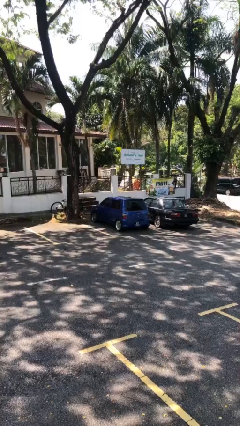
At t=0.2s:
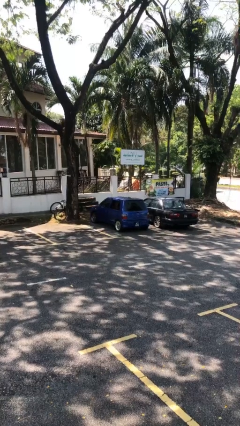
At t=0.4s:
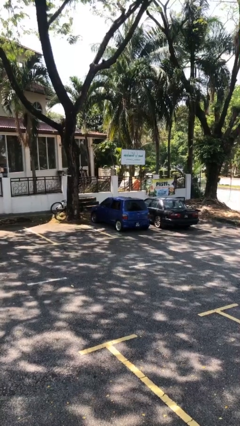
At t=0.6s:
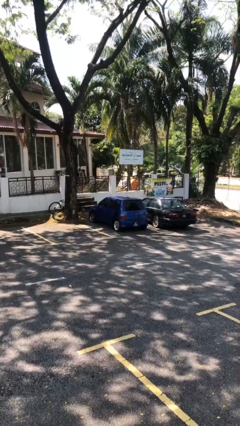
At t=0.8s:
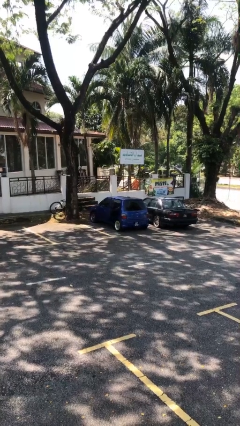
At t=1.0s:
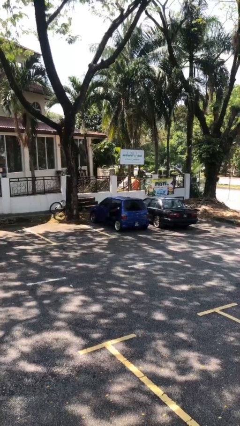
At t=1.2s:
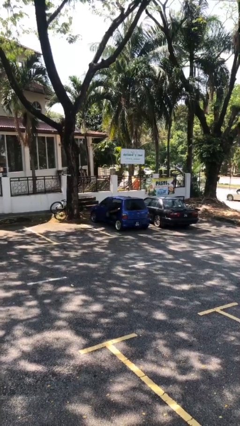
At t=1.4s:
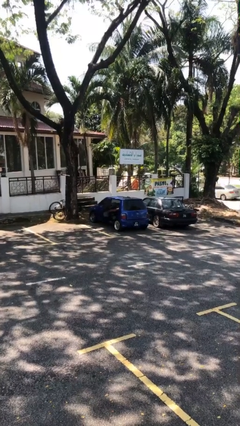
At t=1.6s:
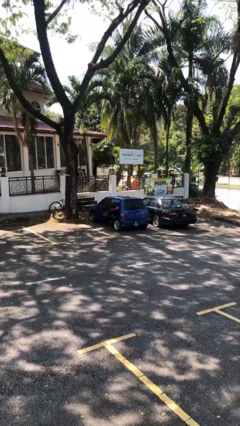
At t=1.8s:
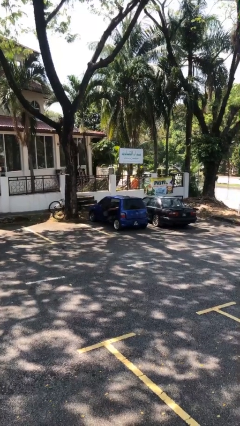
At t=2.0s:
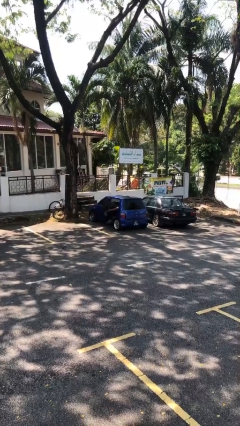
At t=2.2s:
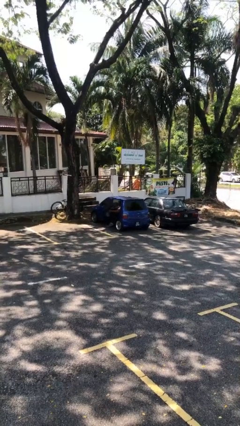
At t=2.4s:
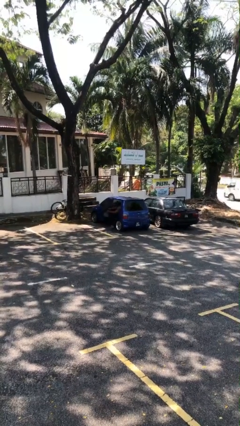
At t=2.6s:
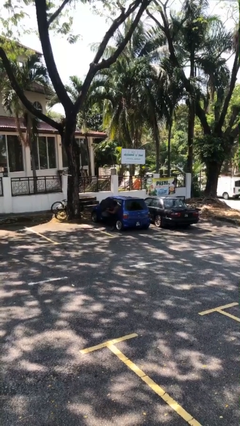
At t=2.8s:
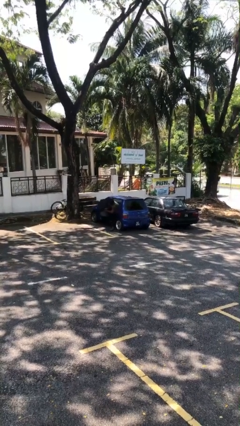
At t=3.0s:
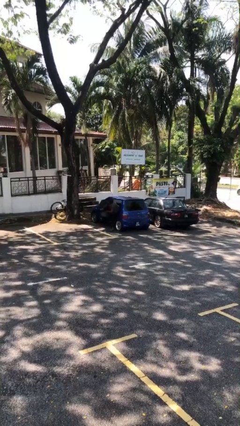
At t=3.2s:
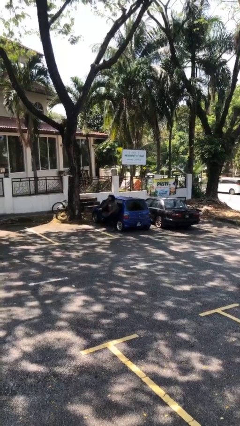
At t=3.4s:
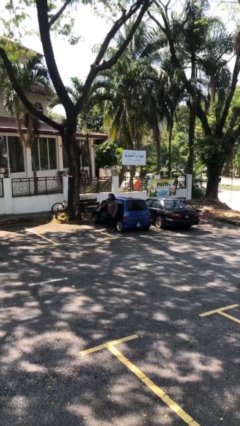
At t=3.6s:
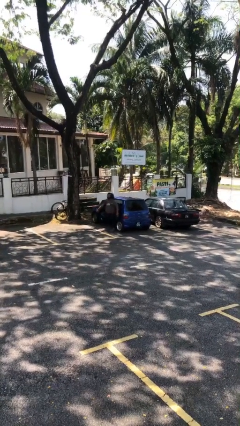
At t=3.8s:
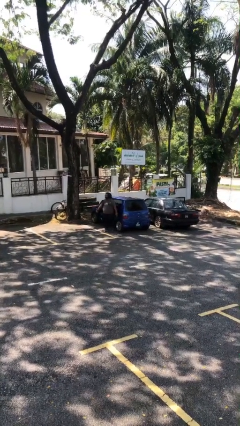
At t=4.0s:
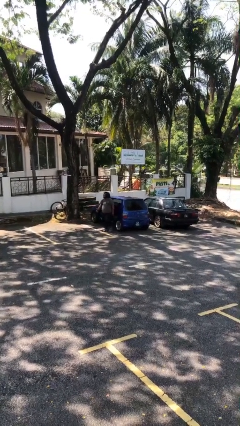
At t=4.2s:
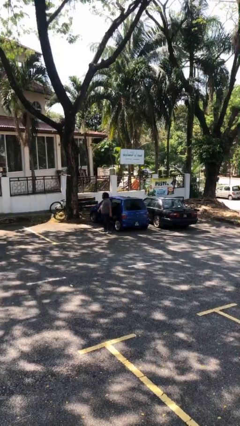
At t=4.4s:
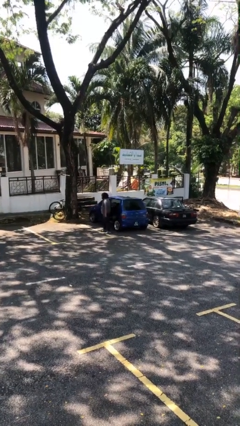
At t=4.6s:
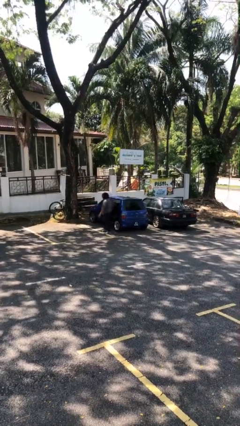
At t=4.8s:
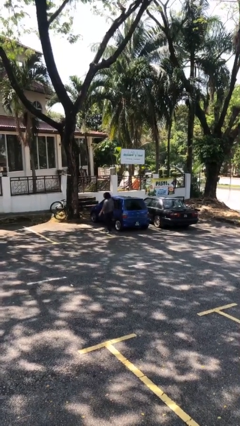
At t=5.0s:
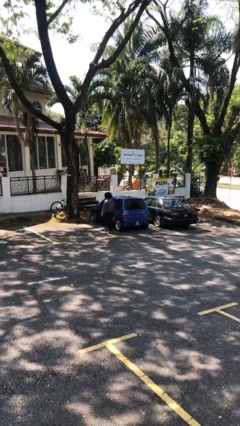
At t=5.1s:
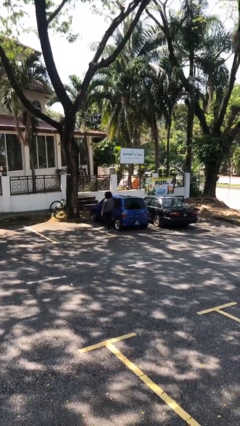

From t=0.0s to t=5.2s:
car drops off person

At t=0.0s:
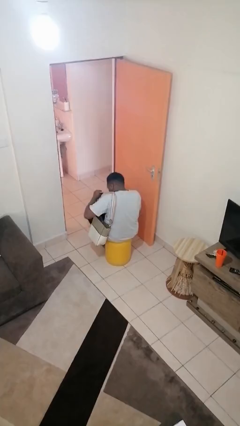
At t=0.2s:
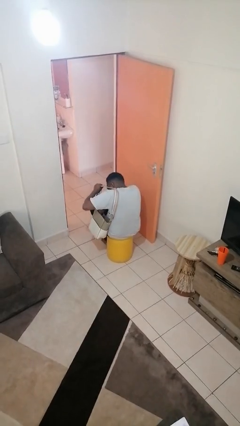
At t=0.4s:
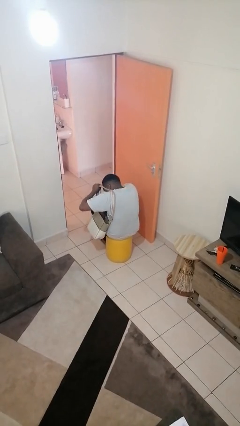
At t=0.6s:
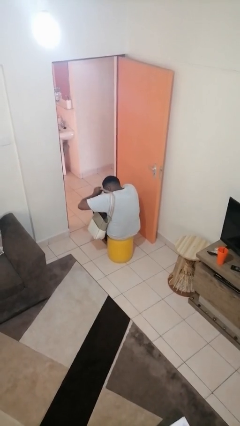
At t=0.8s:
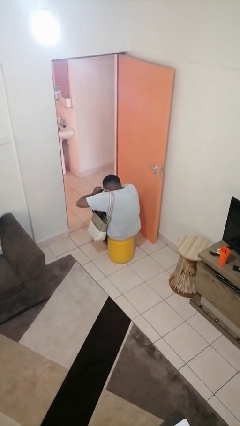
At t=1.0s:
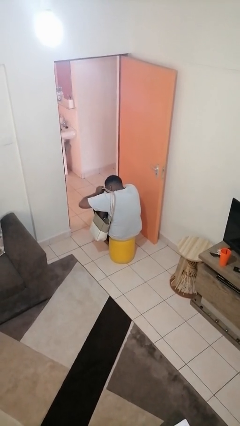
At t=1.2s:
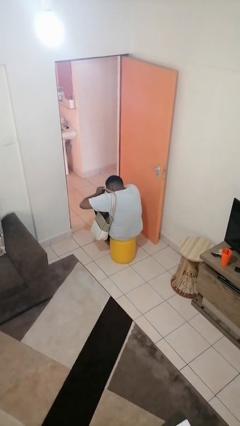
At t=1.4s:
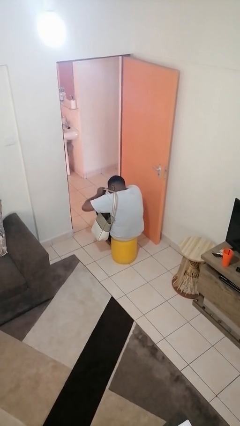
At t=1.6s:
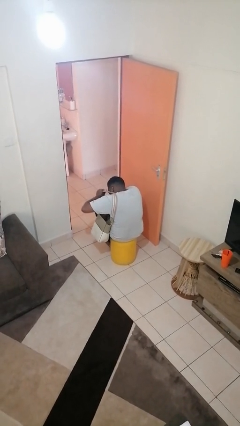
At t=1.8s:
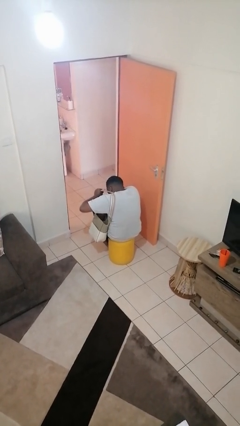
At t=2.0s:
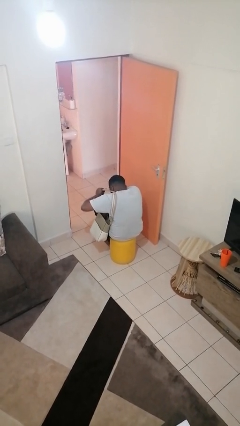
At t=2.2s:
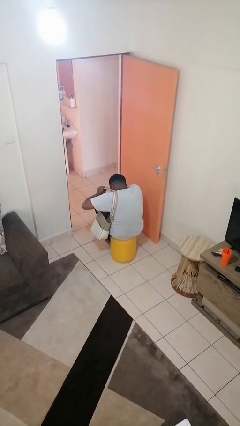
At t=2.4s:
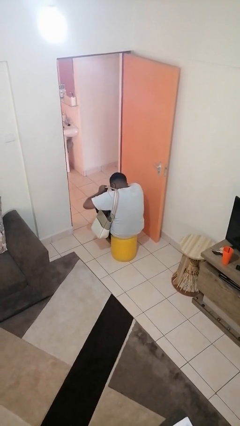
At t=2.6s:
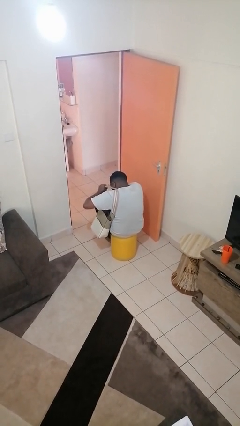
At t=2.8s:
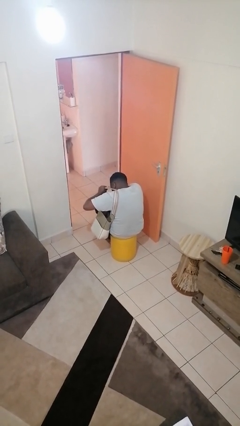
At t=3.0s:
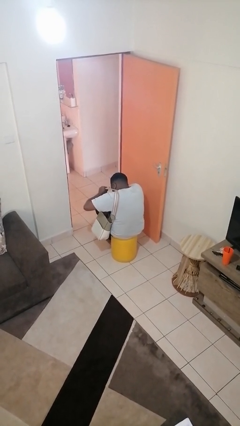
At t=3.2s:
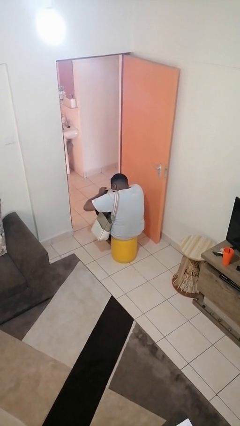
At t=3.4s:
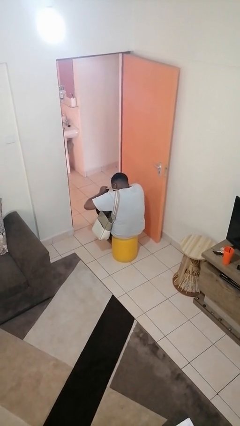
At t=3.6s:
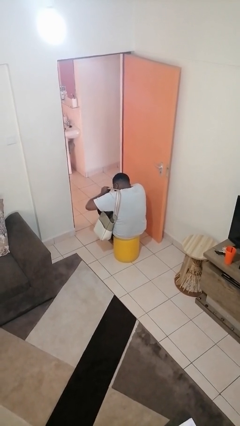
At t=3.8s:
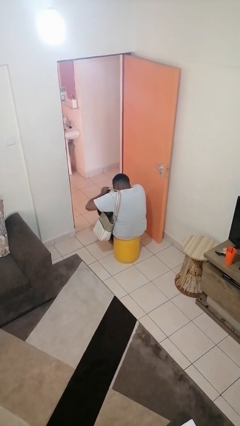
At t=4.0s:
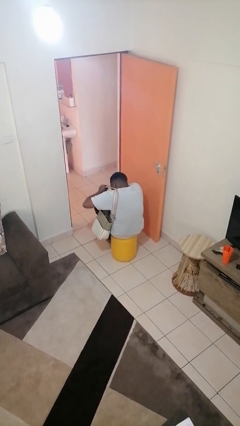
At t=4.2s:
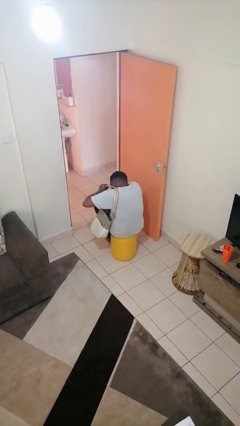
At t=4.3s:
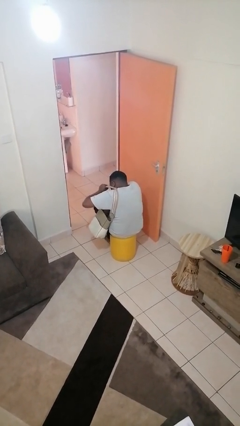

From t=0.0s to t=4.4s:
person searches in purse

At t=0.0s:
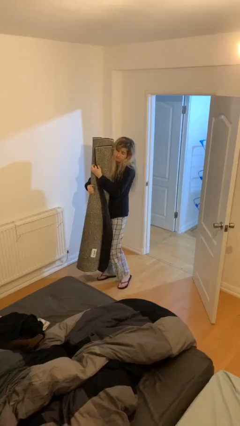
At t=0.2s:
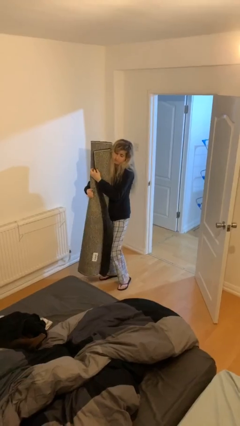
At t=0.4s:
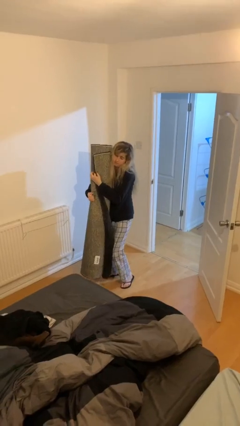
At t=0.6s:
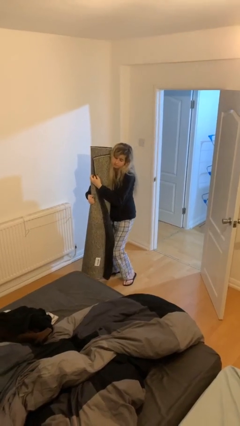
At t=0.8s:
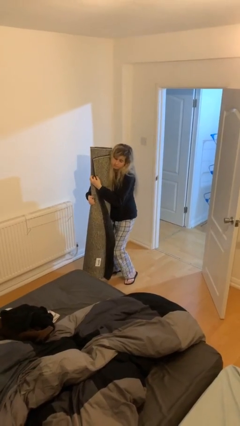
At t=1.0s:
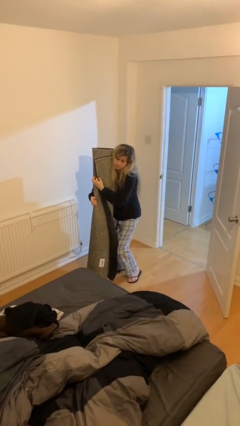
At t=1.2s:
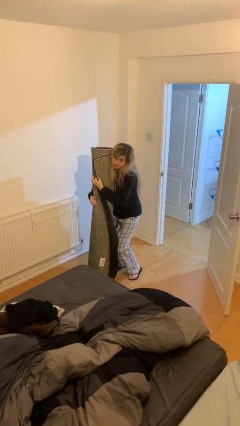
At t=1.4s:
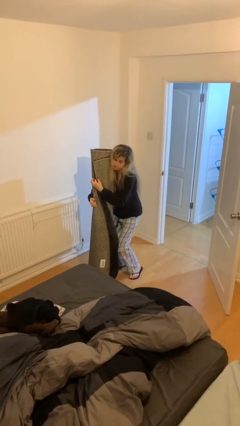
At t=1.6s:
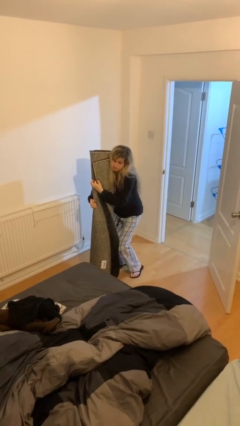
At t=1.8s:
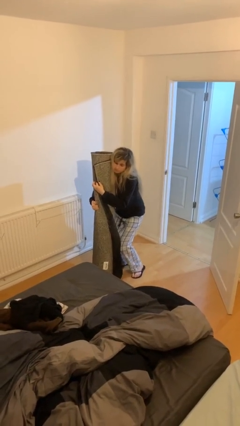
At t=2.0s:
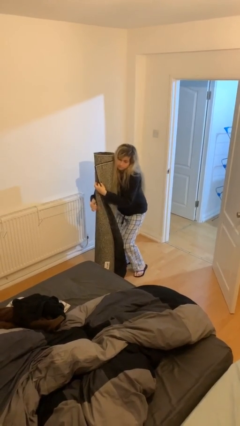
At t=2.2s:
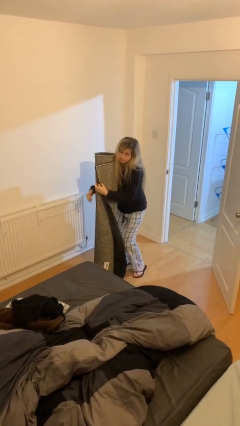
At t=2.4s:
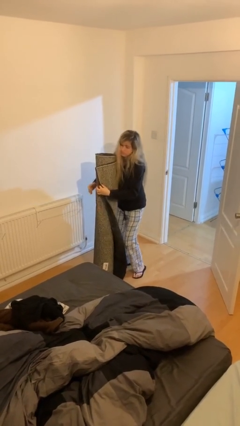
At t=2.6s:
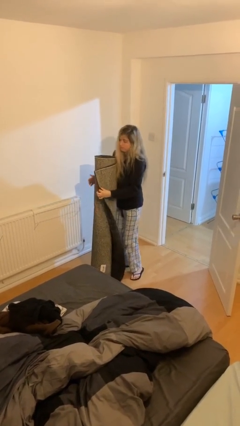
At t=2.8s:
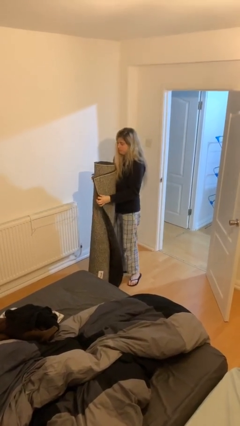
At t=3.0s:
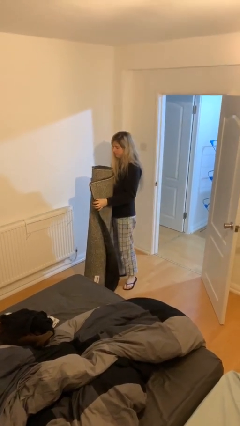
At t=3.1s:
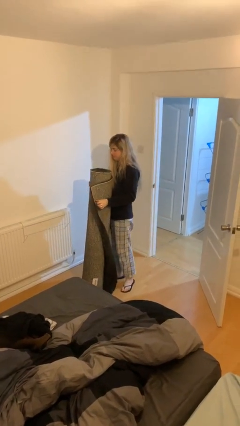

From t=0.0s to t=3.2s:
person puts down object on floor

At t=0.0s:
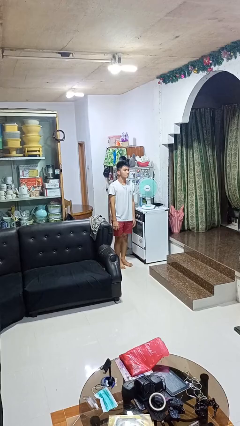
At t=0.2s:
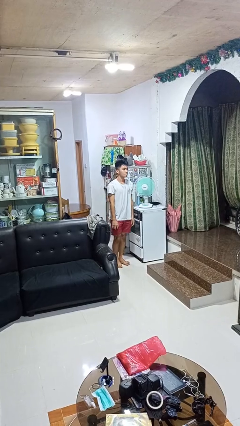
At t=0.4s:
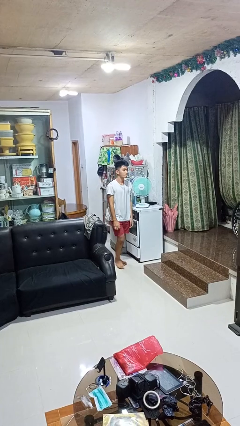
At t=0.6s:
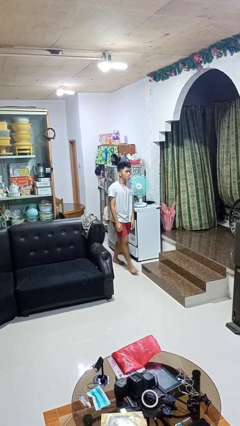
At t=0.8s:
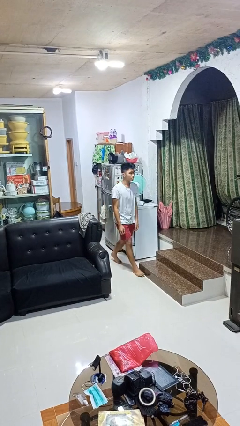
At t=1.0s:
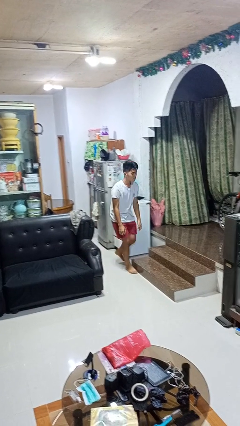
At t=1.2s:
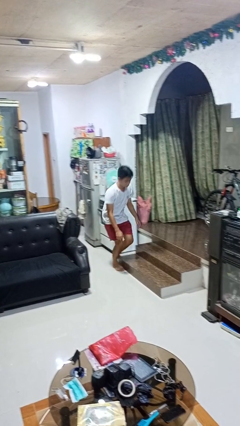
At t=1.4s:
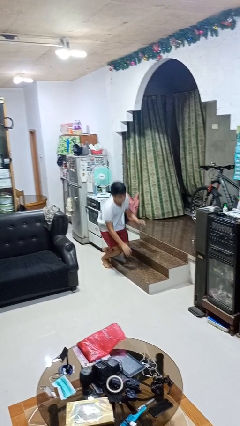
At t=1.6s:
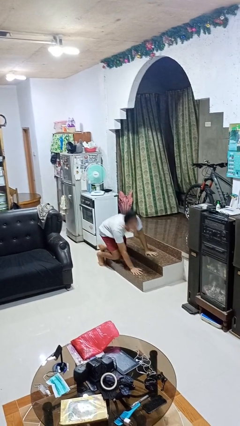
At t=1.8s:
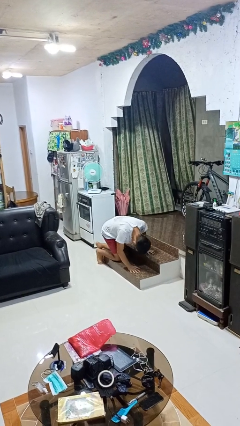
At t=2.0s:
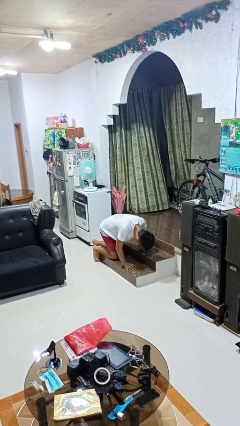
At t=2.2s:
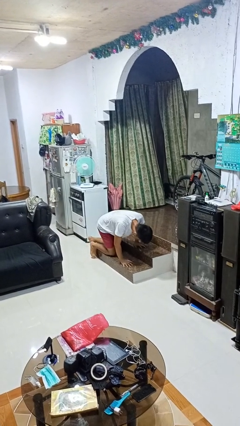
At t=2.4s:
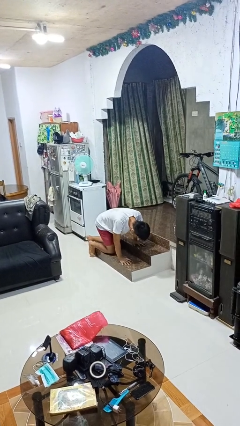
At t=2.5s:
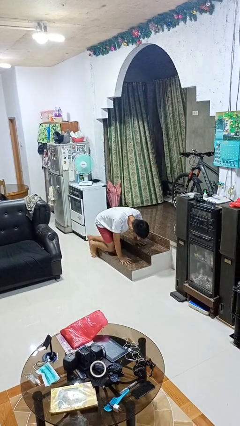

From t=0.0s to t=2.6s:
person trips on object on floor

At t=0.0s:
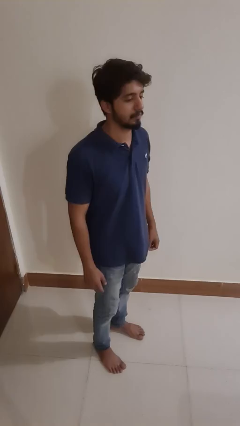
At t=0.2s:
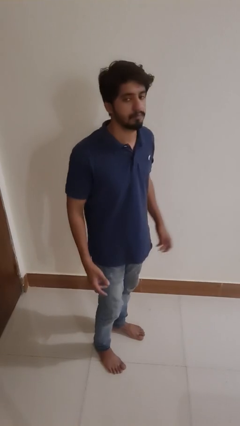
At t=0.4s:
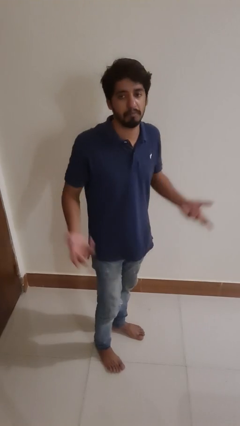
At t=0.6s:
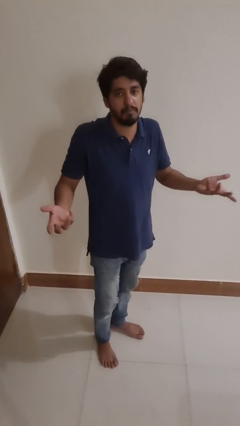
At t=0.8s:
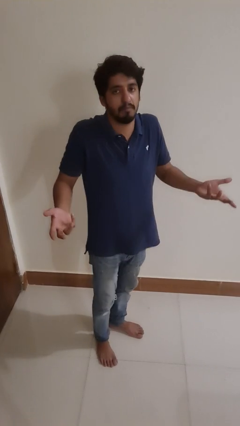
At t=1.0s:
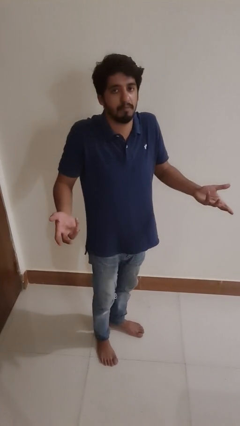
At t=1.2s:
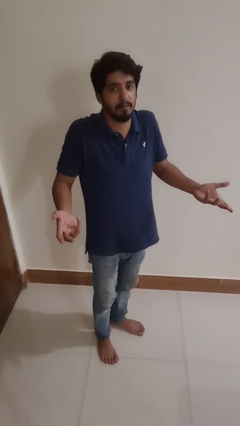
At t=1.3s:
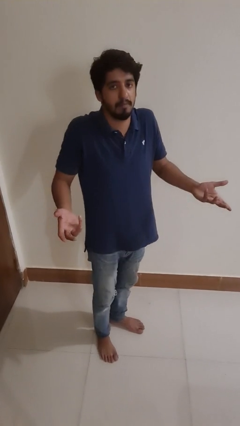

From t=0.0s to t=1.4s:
person shrugs

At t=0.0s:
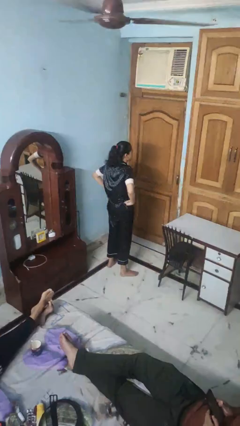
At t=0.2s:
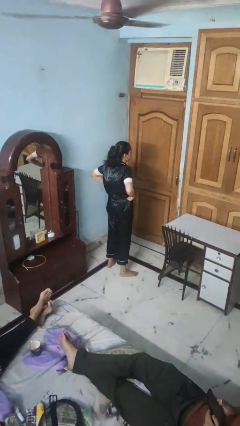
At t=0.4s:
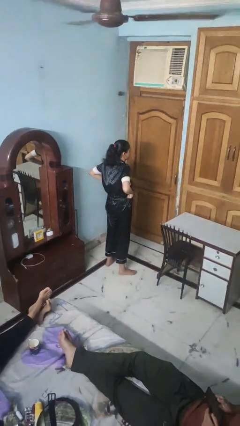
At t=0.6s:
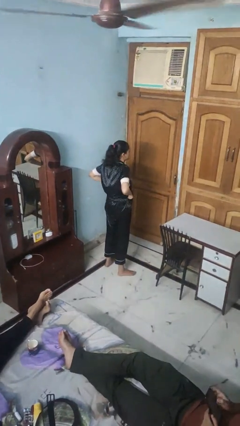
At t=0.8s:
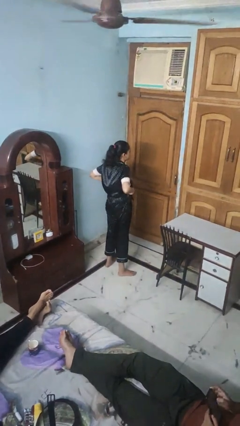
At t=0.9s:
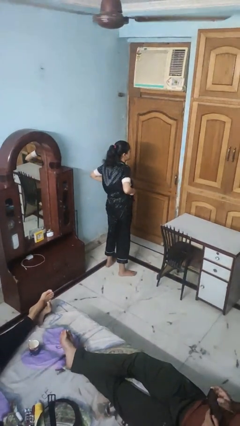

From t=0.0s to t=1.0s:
person hikes up pants
